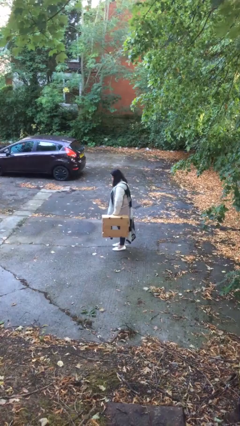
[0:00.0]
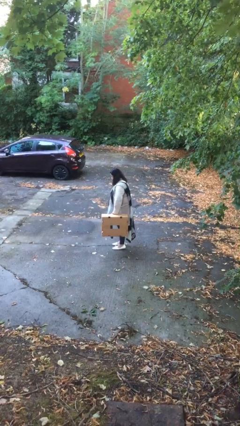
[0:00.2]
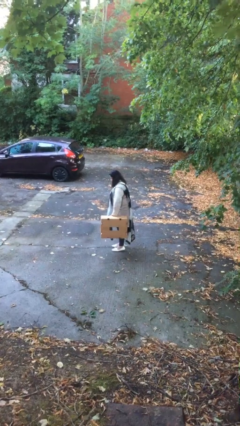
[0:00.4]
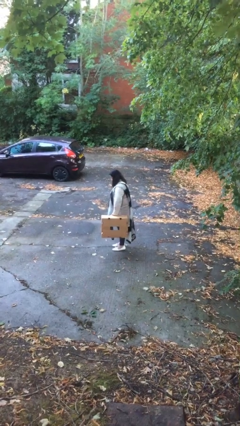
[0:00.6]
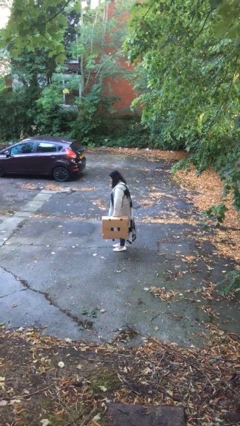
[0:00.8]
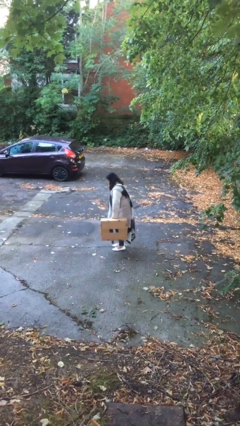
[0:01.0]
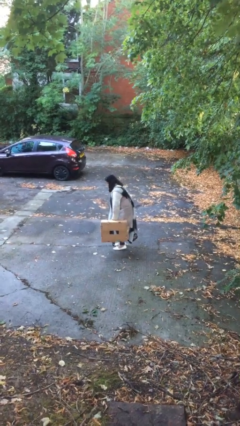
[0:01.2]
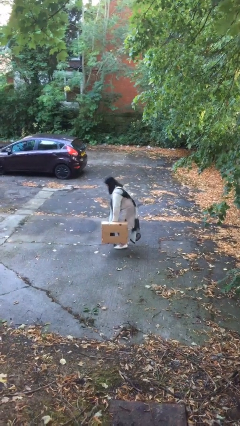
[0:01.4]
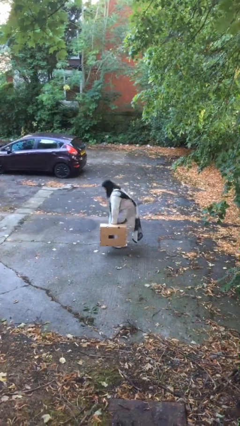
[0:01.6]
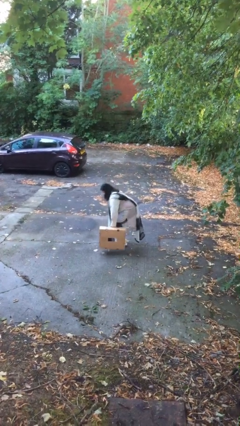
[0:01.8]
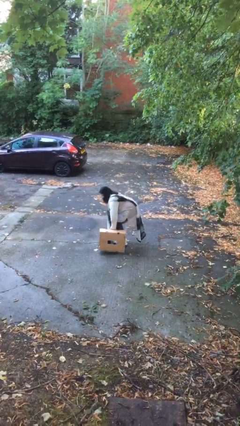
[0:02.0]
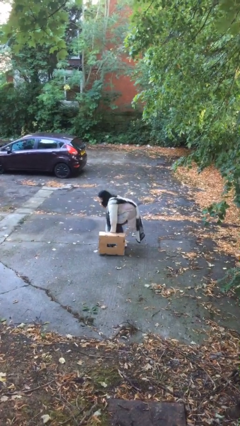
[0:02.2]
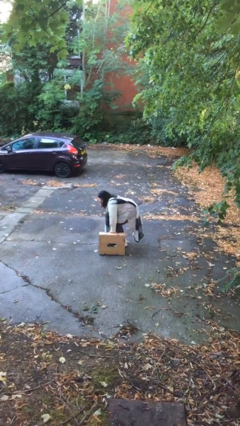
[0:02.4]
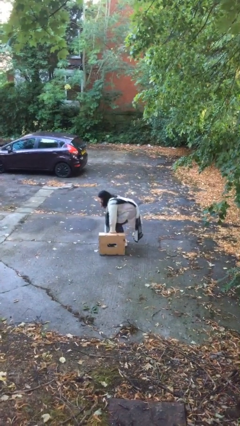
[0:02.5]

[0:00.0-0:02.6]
person puts down object on floor

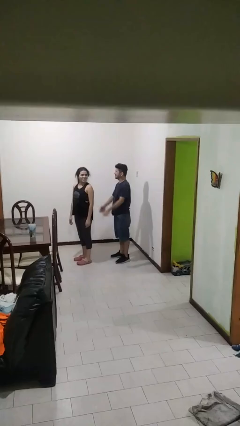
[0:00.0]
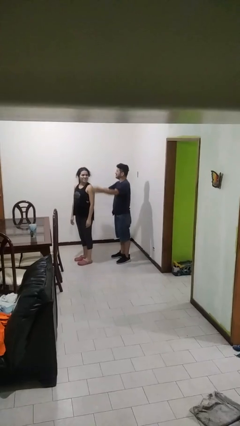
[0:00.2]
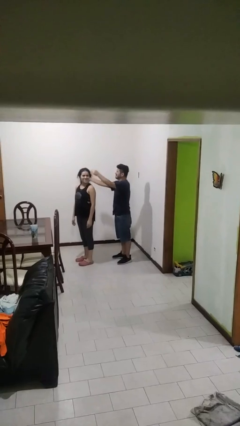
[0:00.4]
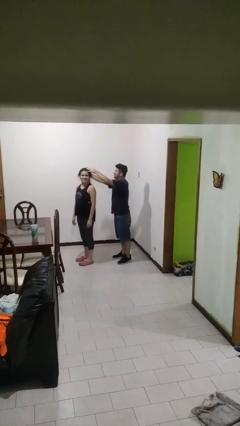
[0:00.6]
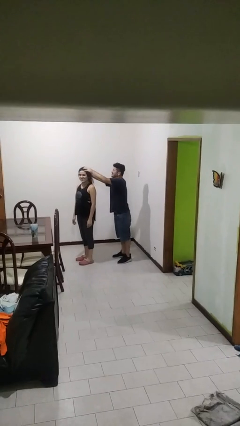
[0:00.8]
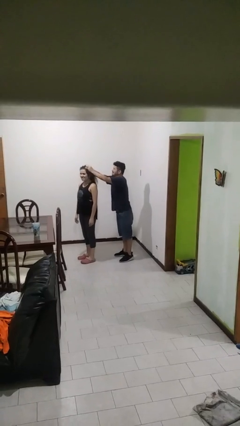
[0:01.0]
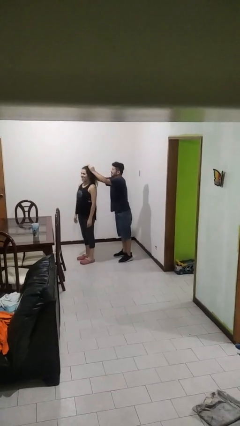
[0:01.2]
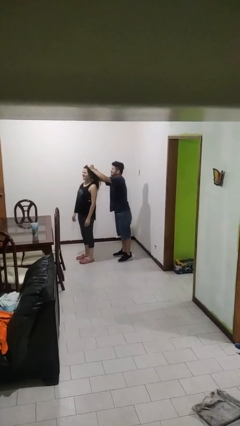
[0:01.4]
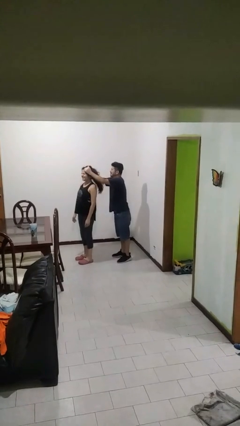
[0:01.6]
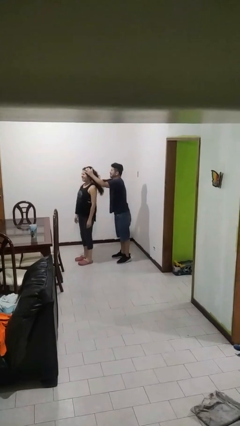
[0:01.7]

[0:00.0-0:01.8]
person grabs person by hair

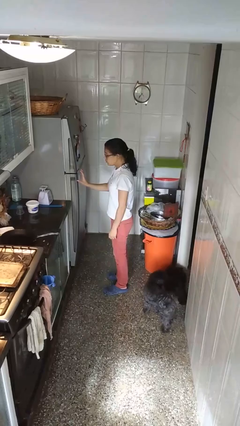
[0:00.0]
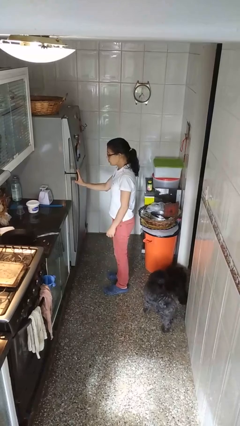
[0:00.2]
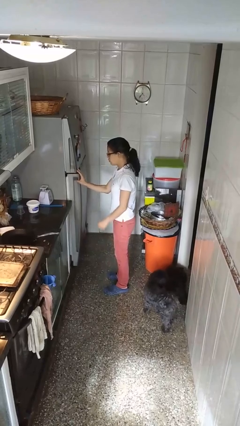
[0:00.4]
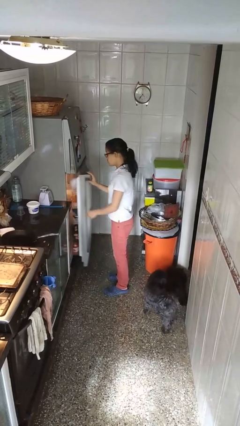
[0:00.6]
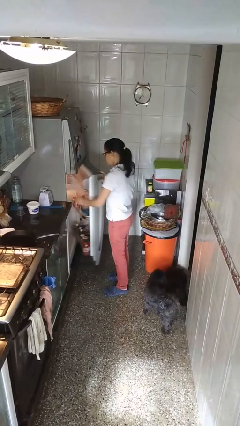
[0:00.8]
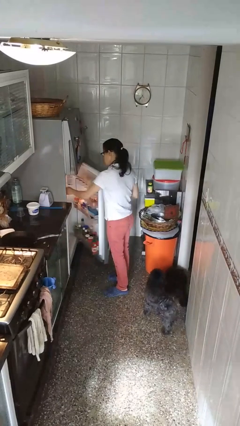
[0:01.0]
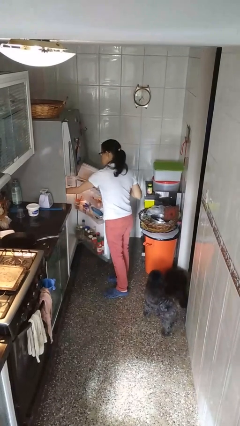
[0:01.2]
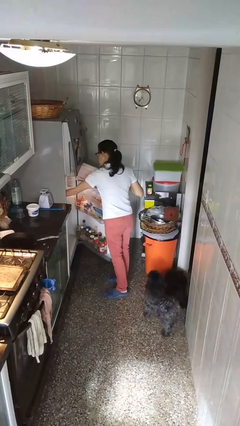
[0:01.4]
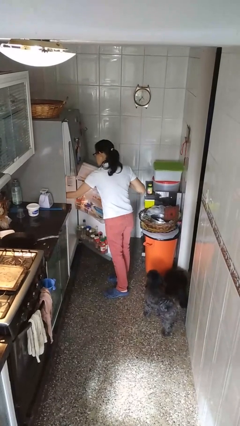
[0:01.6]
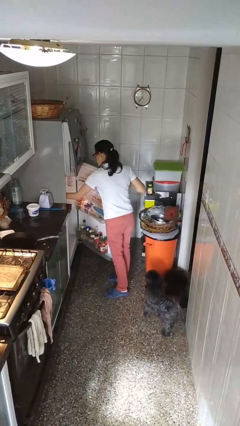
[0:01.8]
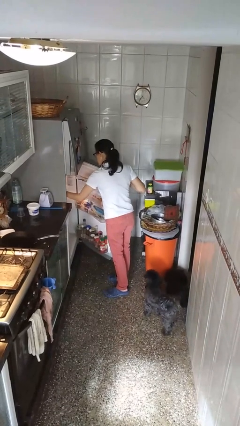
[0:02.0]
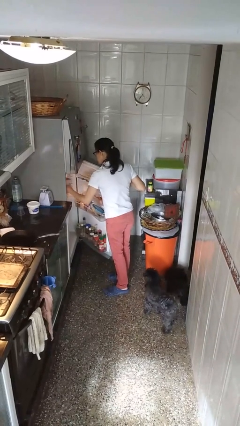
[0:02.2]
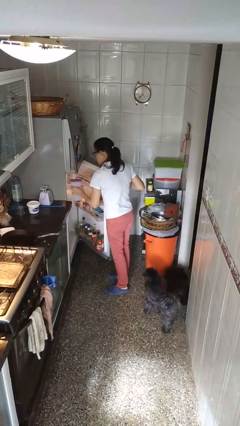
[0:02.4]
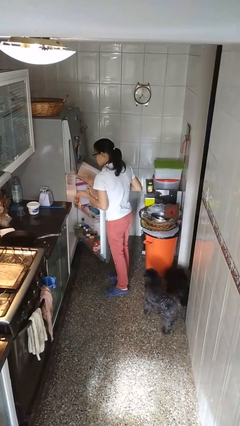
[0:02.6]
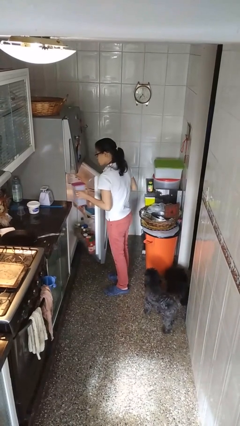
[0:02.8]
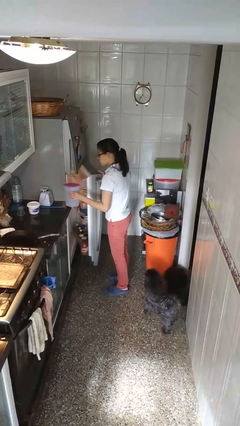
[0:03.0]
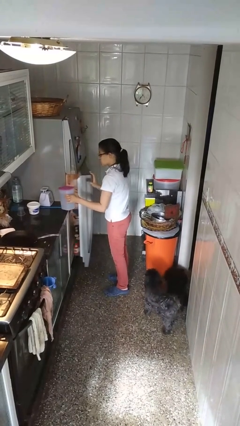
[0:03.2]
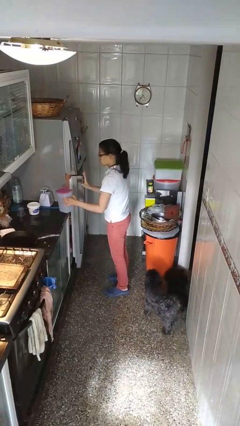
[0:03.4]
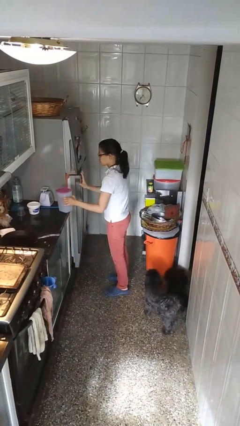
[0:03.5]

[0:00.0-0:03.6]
person takes object from refrigerator

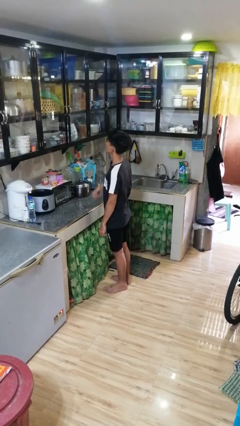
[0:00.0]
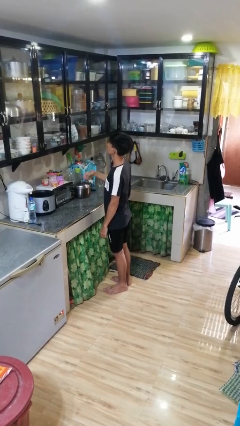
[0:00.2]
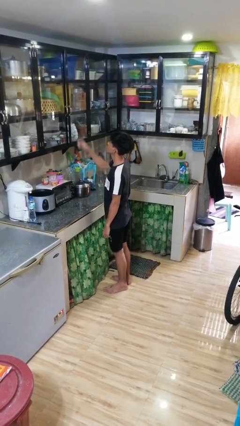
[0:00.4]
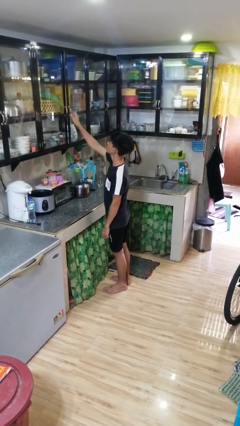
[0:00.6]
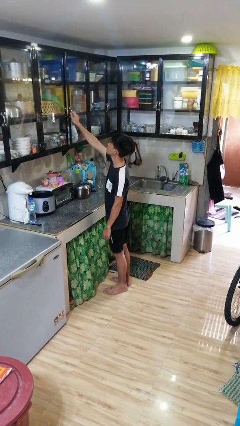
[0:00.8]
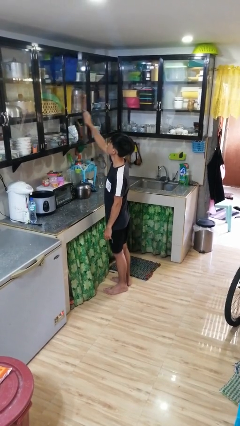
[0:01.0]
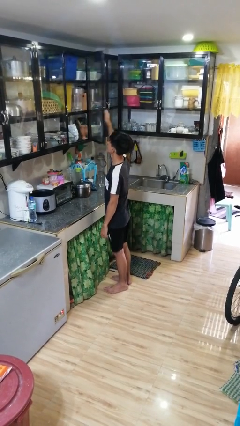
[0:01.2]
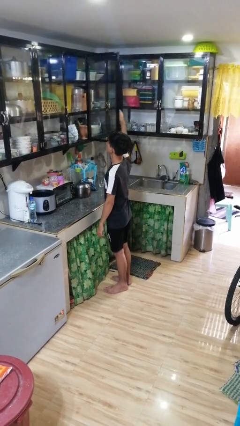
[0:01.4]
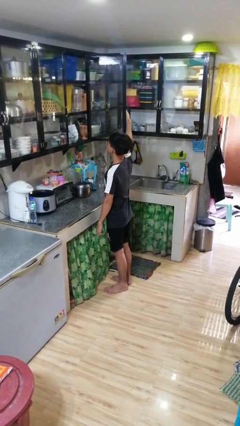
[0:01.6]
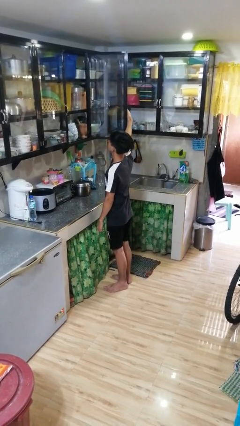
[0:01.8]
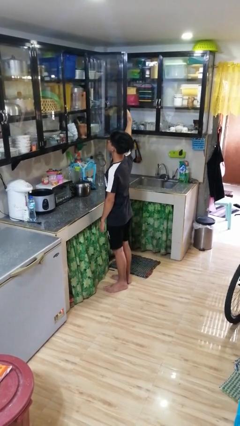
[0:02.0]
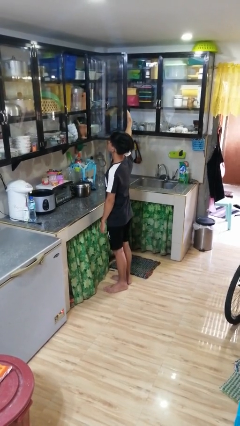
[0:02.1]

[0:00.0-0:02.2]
person opens cabinet

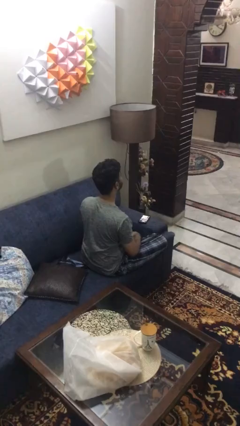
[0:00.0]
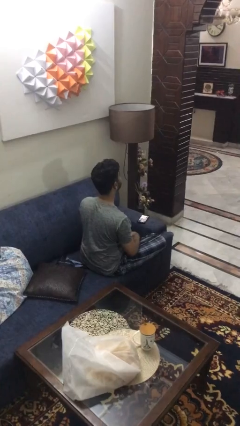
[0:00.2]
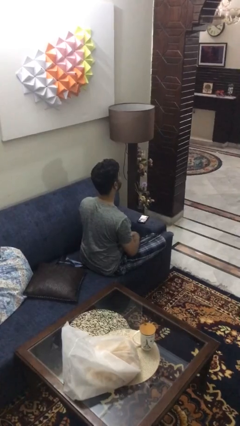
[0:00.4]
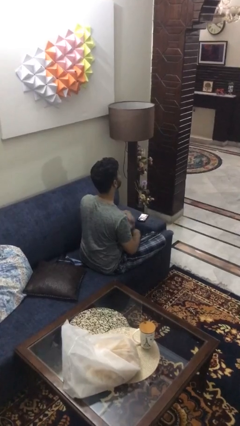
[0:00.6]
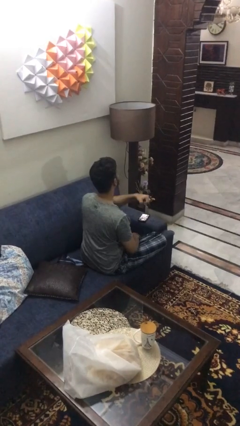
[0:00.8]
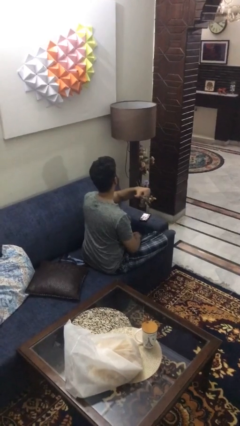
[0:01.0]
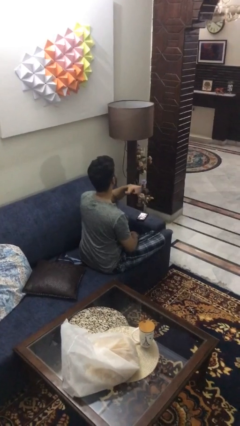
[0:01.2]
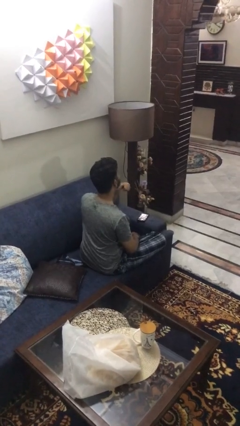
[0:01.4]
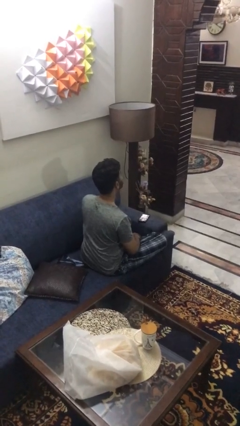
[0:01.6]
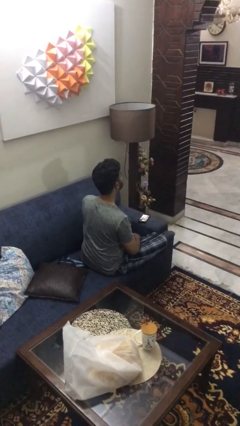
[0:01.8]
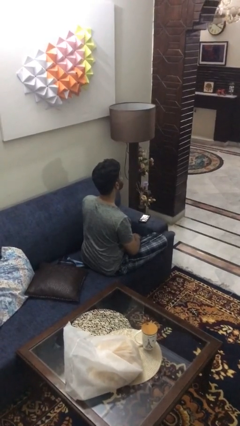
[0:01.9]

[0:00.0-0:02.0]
person gestures cut

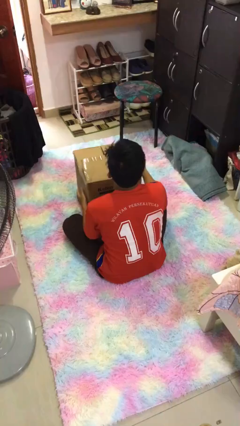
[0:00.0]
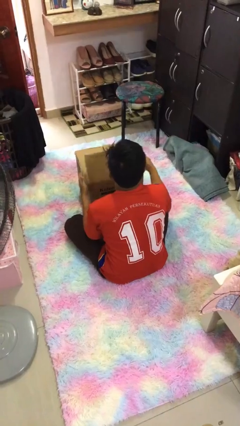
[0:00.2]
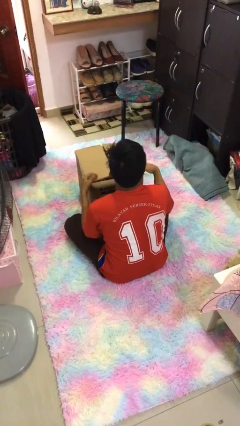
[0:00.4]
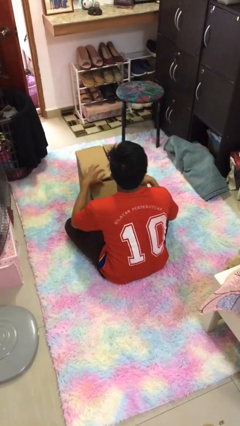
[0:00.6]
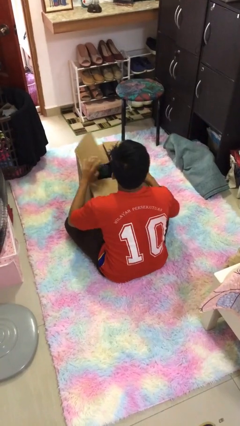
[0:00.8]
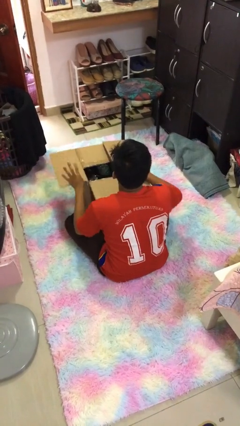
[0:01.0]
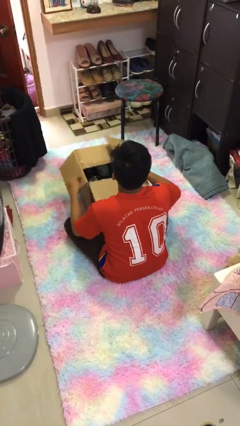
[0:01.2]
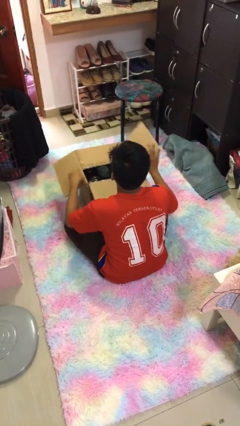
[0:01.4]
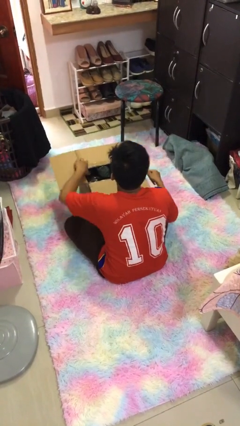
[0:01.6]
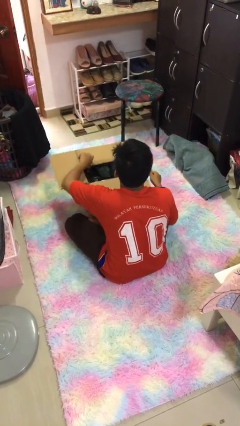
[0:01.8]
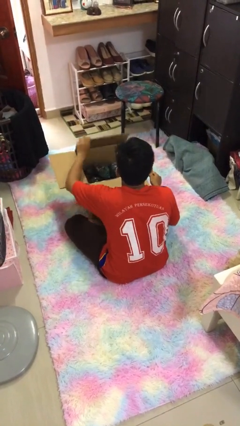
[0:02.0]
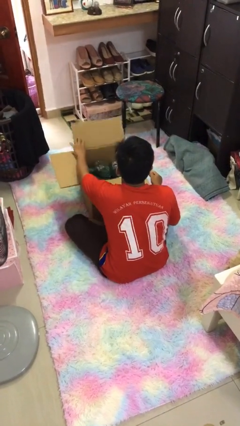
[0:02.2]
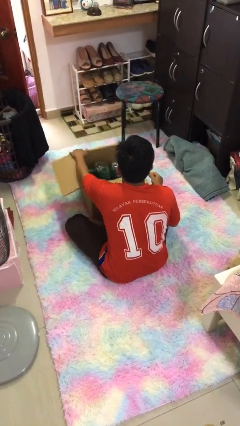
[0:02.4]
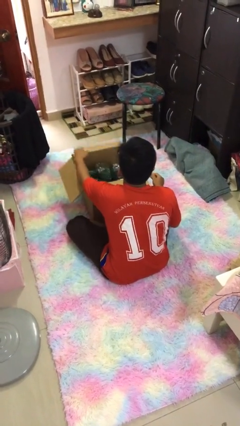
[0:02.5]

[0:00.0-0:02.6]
person opens box

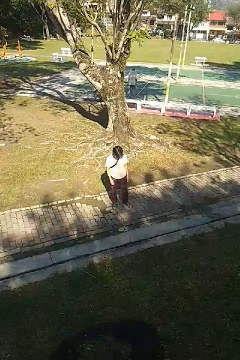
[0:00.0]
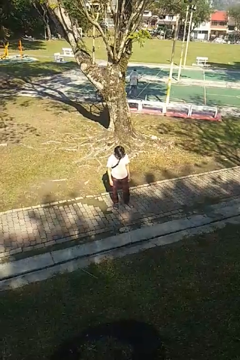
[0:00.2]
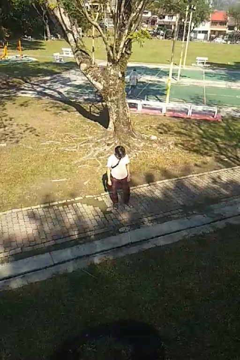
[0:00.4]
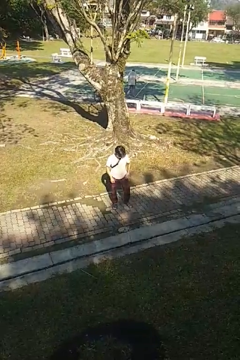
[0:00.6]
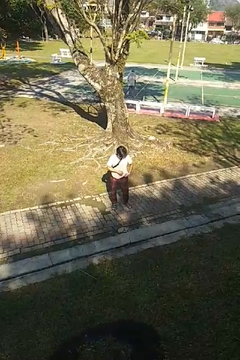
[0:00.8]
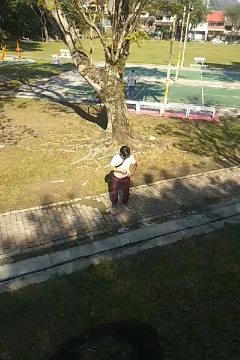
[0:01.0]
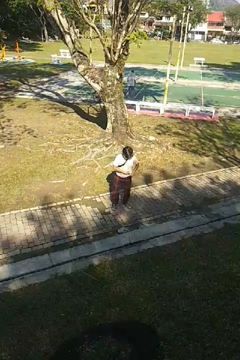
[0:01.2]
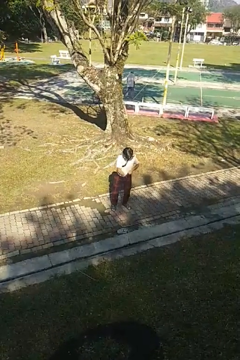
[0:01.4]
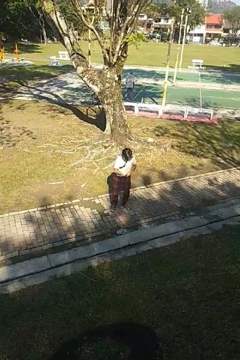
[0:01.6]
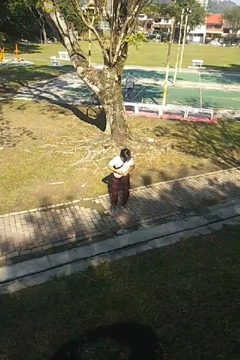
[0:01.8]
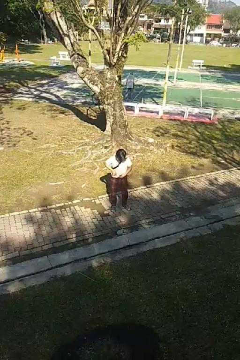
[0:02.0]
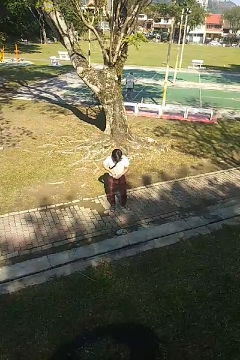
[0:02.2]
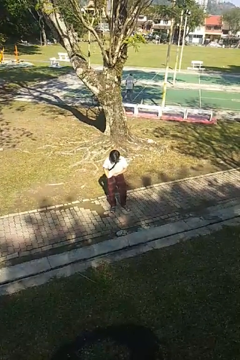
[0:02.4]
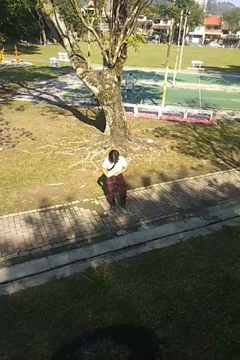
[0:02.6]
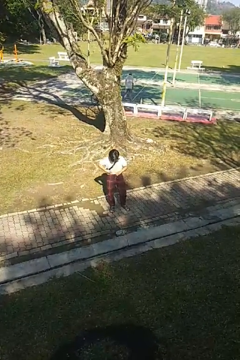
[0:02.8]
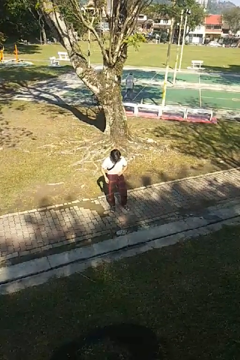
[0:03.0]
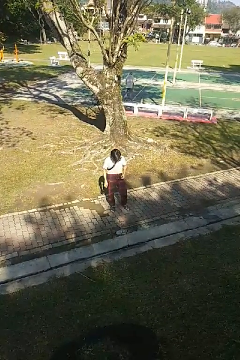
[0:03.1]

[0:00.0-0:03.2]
person tucks in shirt
